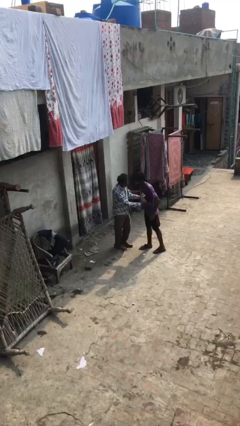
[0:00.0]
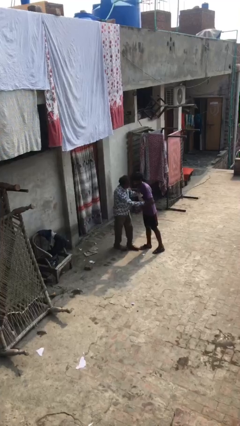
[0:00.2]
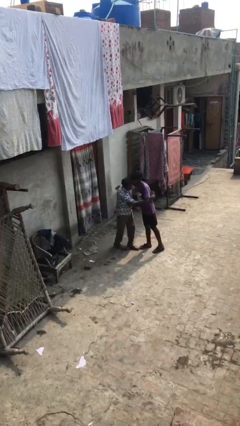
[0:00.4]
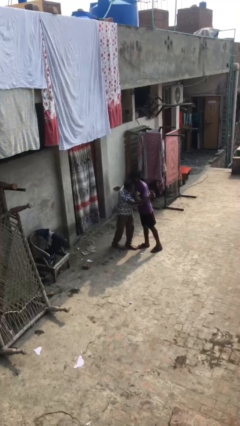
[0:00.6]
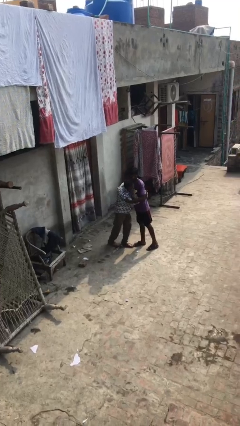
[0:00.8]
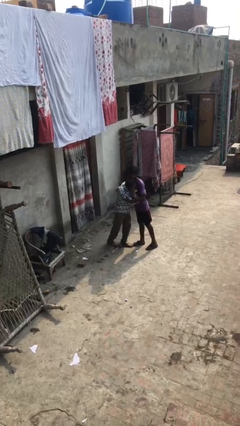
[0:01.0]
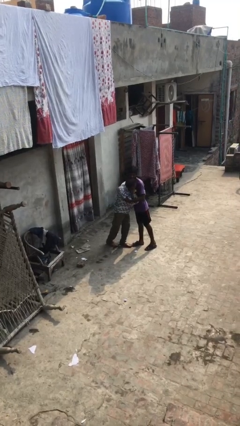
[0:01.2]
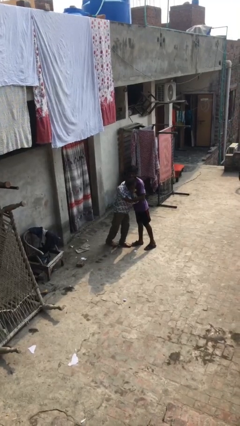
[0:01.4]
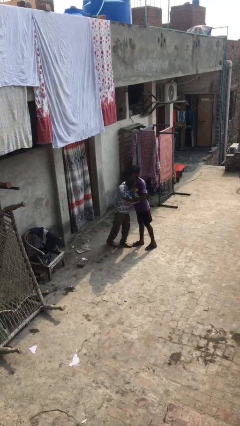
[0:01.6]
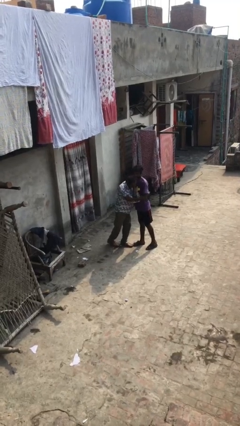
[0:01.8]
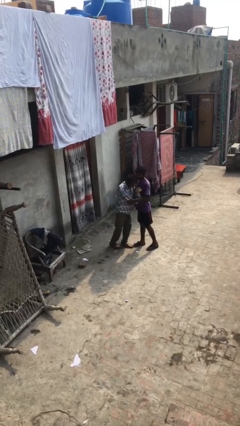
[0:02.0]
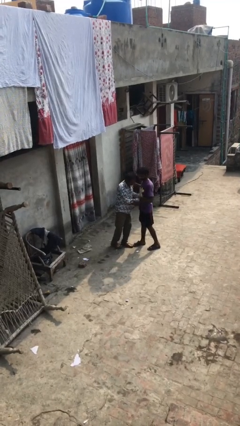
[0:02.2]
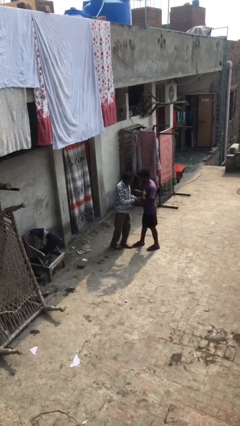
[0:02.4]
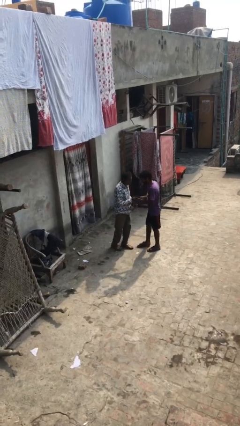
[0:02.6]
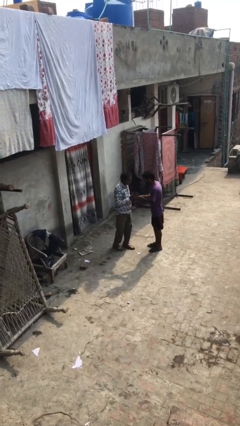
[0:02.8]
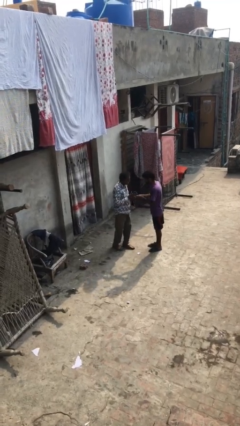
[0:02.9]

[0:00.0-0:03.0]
person embraces person

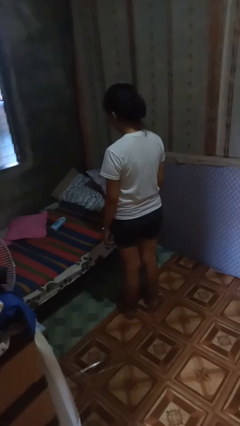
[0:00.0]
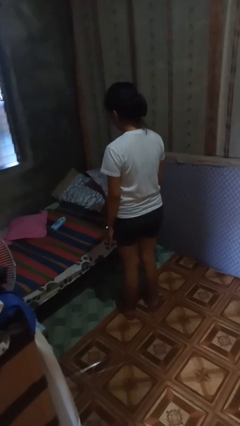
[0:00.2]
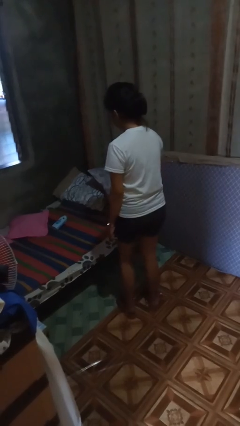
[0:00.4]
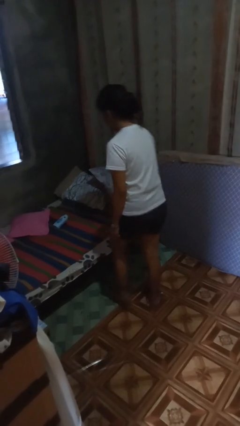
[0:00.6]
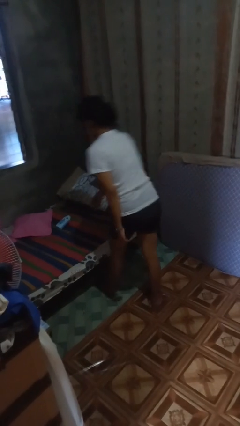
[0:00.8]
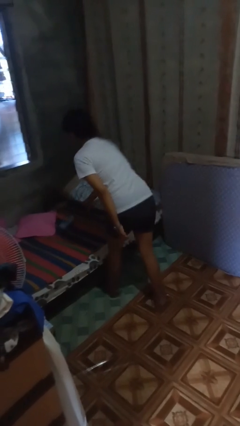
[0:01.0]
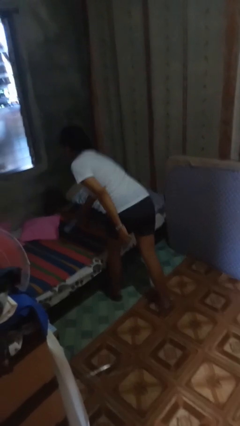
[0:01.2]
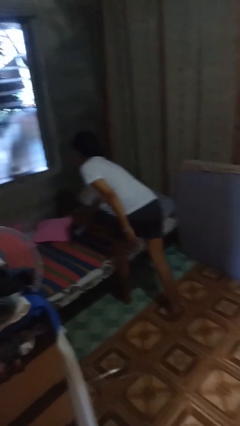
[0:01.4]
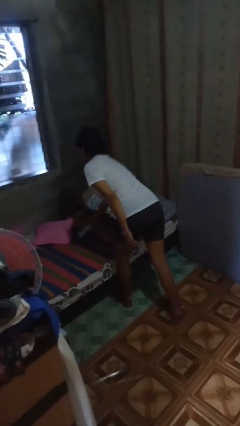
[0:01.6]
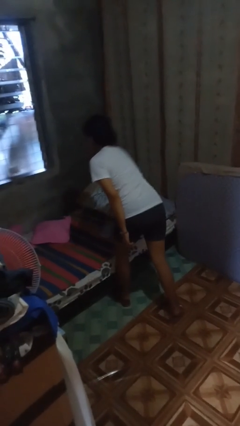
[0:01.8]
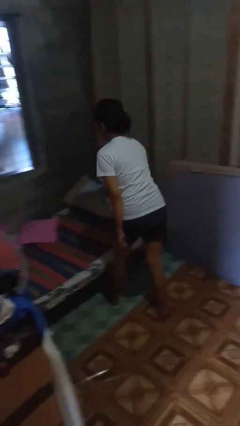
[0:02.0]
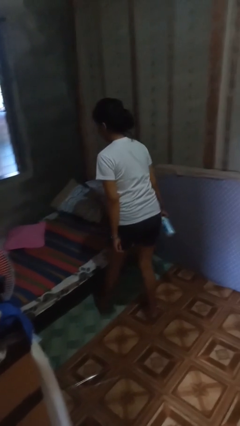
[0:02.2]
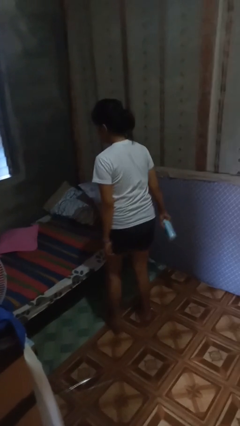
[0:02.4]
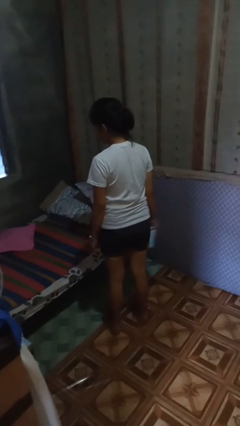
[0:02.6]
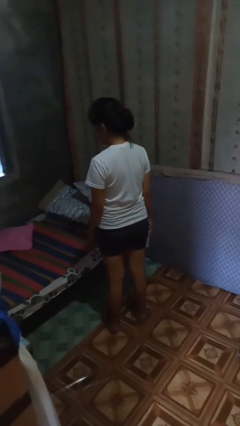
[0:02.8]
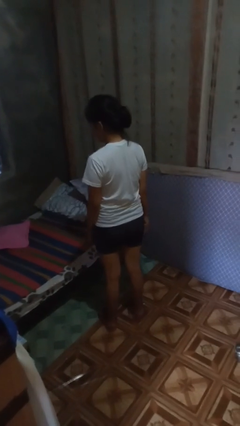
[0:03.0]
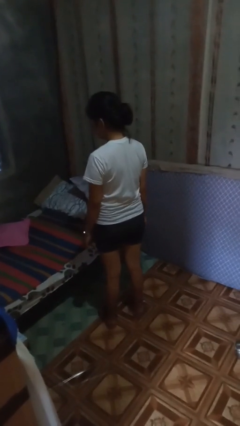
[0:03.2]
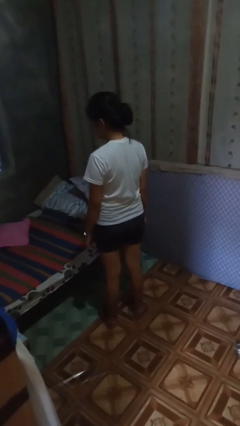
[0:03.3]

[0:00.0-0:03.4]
person picks up object from bed

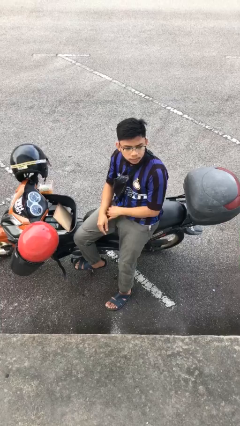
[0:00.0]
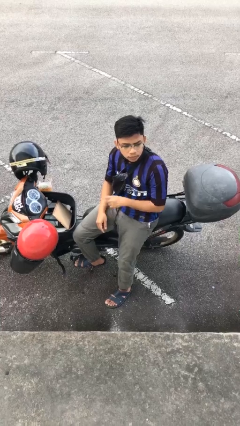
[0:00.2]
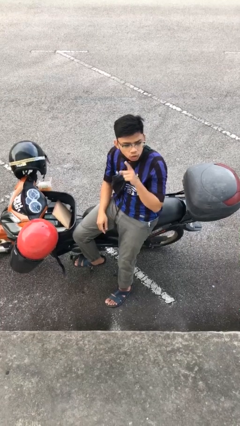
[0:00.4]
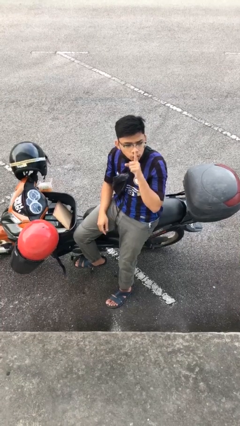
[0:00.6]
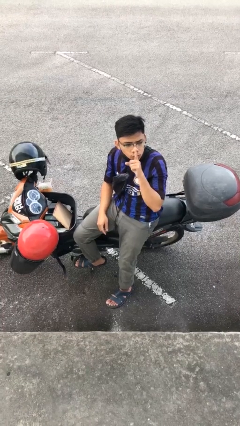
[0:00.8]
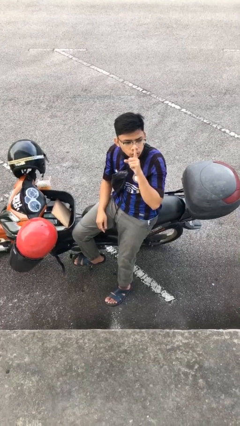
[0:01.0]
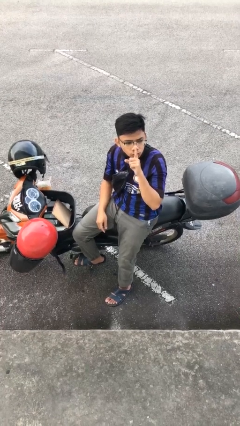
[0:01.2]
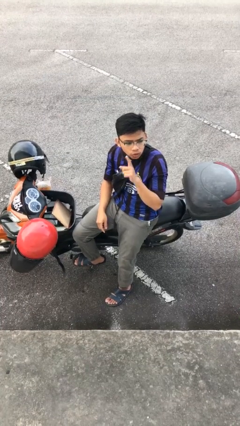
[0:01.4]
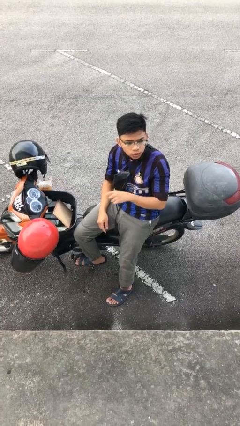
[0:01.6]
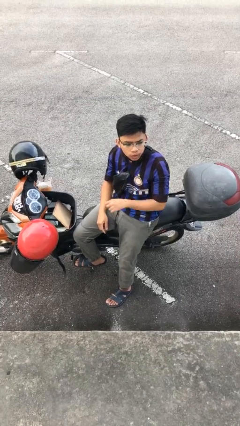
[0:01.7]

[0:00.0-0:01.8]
person gestures be quiet

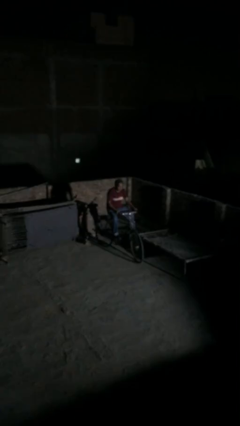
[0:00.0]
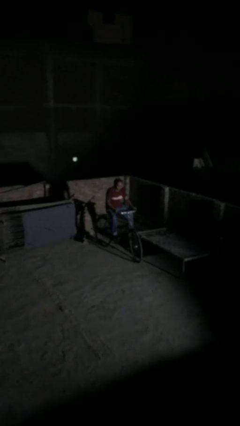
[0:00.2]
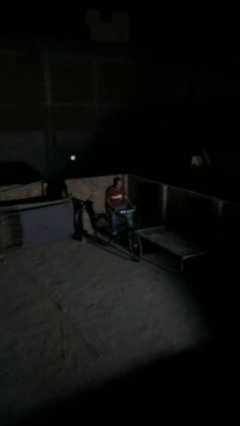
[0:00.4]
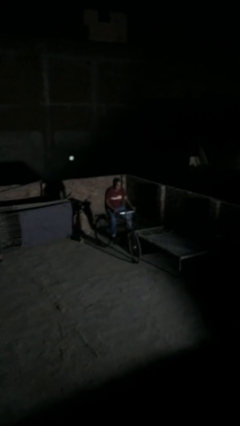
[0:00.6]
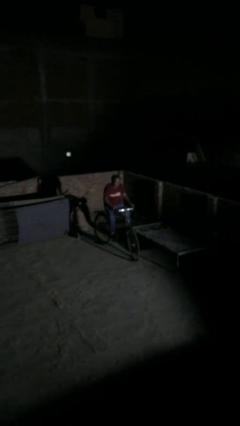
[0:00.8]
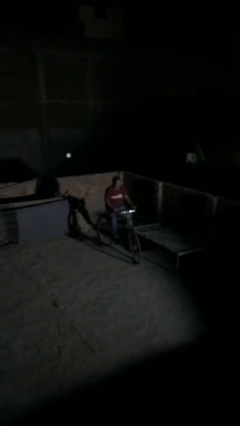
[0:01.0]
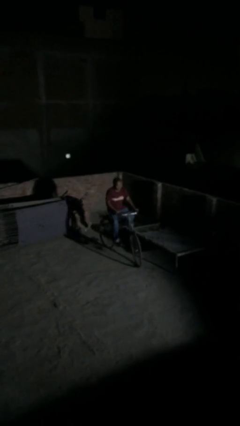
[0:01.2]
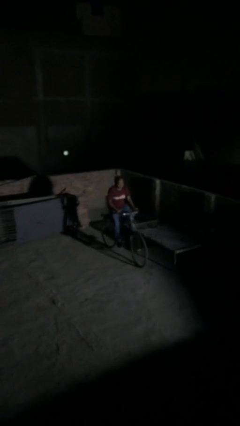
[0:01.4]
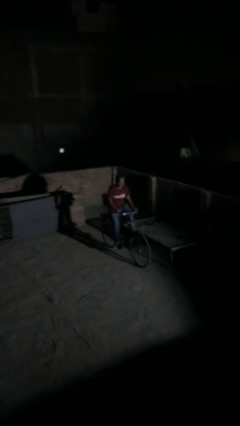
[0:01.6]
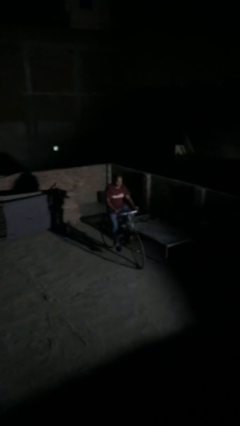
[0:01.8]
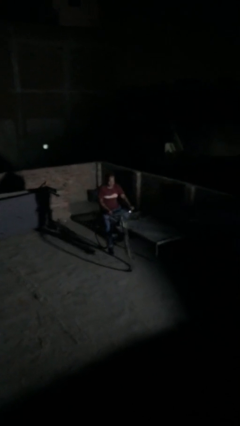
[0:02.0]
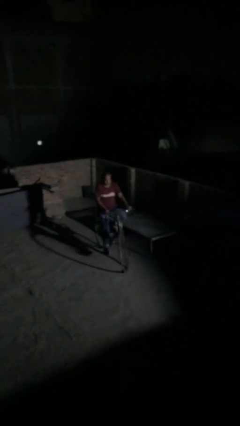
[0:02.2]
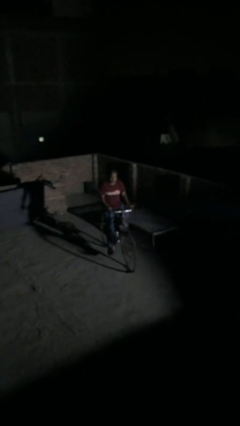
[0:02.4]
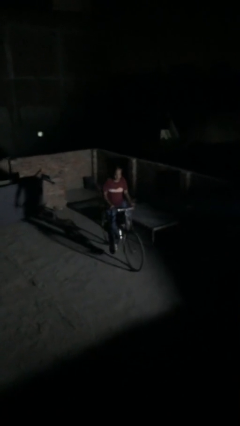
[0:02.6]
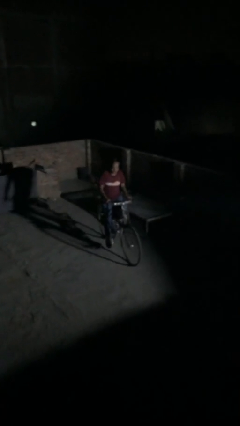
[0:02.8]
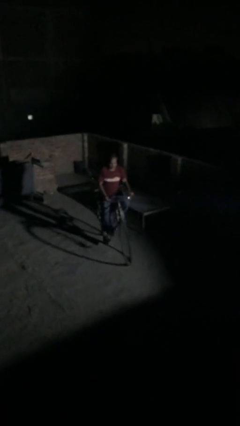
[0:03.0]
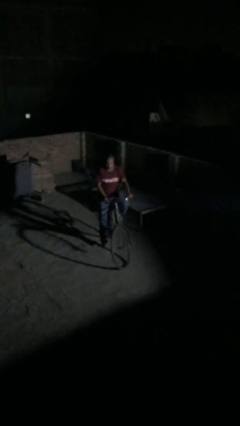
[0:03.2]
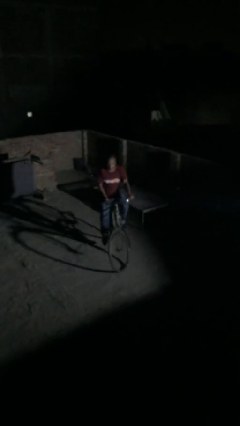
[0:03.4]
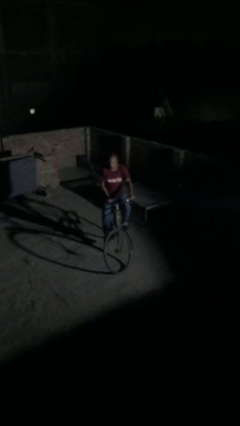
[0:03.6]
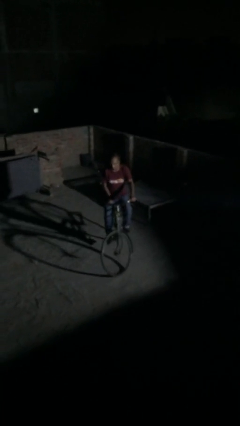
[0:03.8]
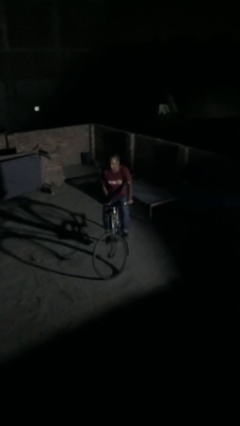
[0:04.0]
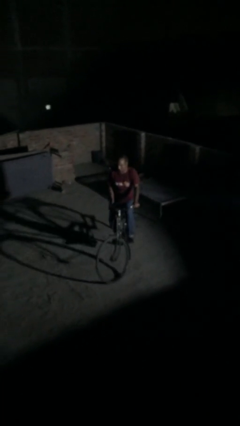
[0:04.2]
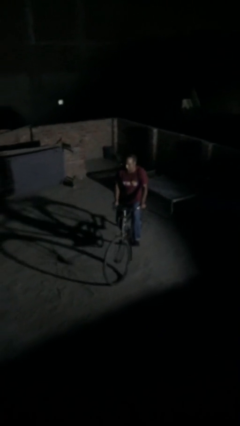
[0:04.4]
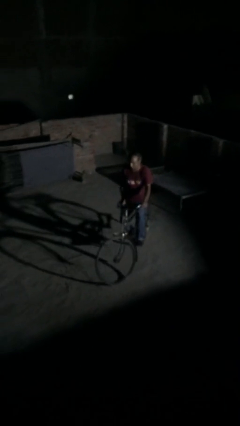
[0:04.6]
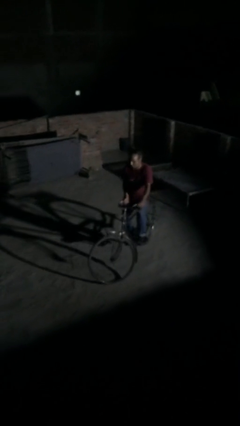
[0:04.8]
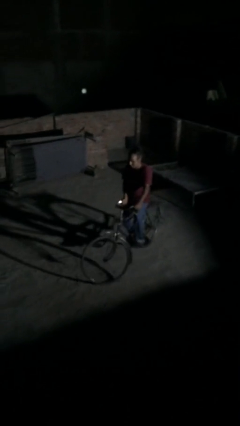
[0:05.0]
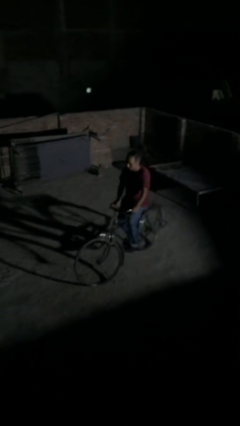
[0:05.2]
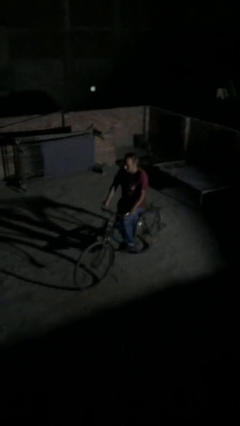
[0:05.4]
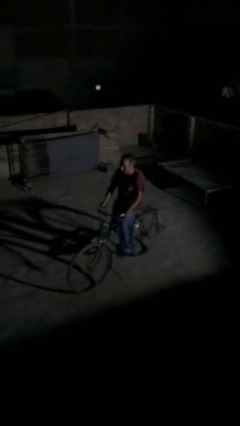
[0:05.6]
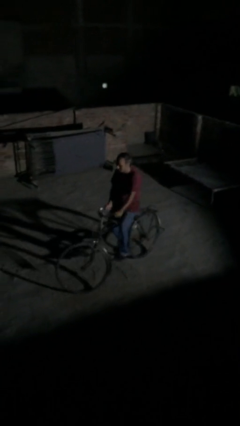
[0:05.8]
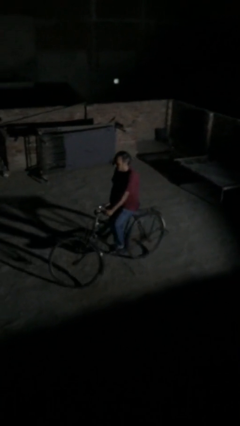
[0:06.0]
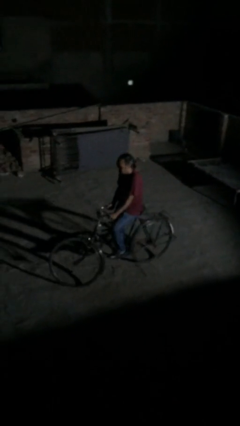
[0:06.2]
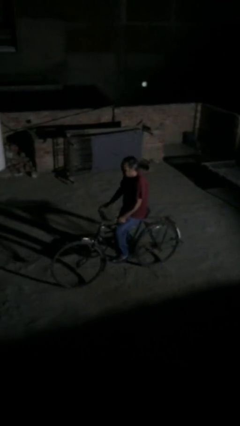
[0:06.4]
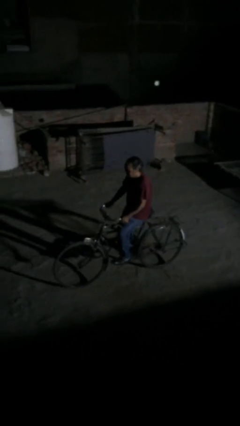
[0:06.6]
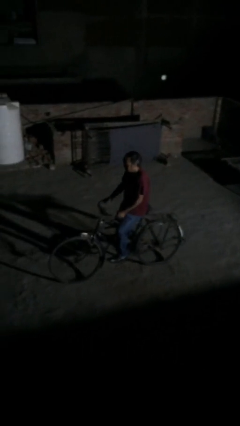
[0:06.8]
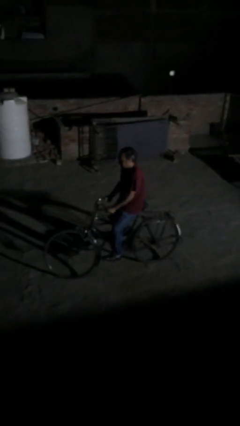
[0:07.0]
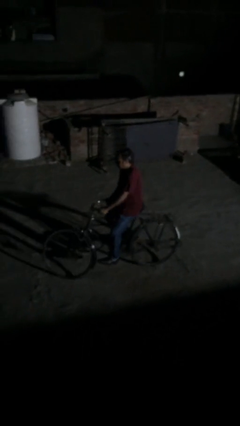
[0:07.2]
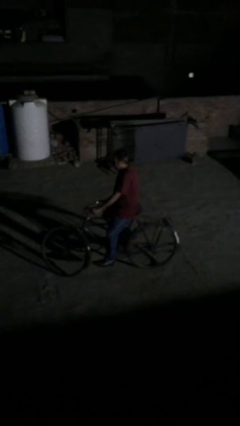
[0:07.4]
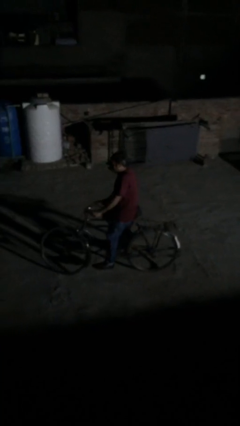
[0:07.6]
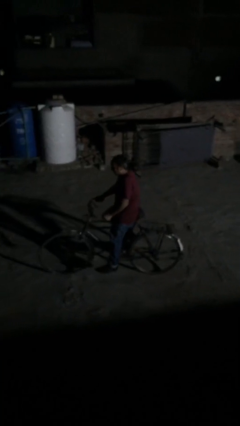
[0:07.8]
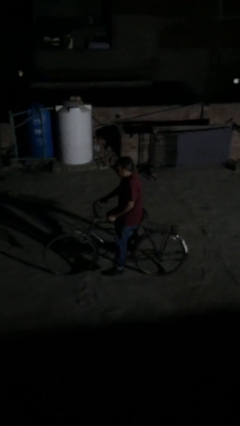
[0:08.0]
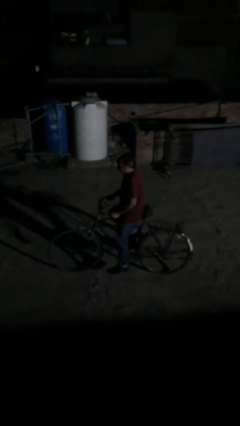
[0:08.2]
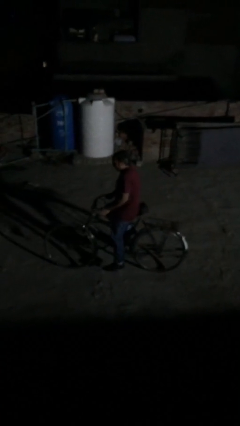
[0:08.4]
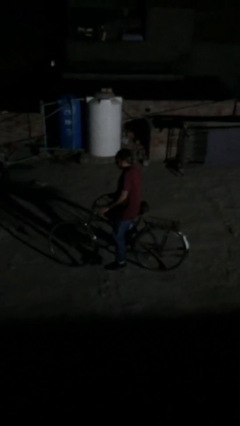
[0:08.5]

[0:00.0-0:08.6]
person rides bicycle

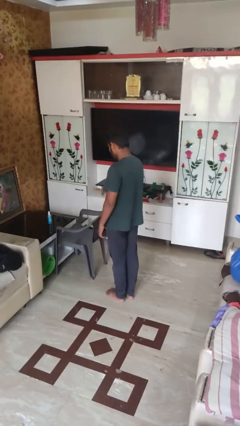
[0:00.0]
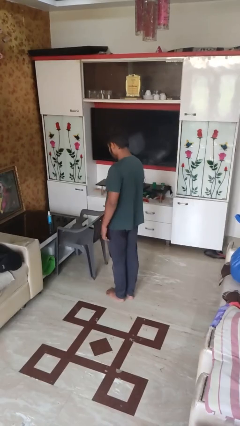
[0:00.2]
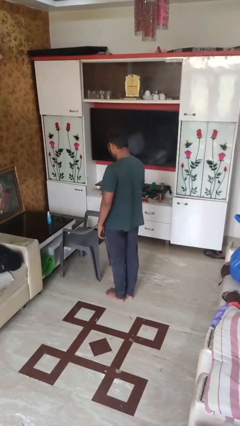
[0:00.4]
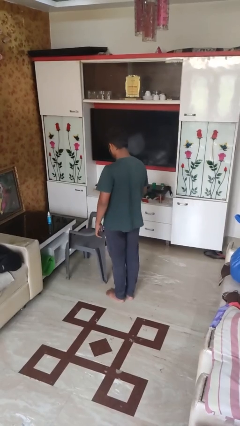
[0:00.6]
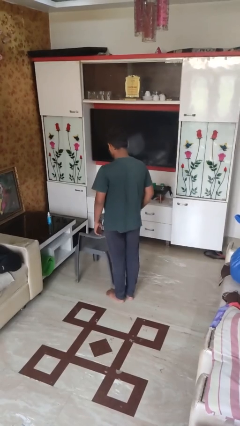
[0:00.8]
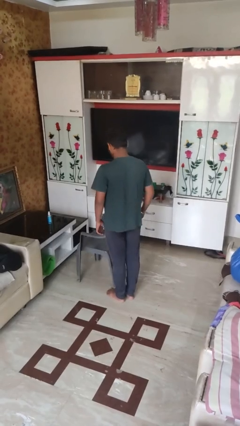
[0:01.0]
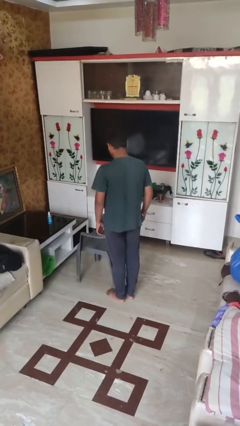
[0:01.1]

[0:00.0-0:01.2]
person pulls out chair
